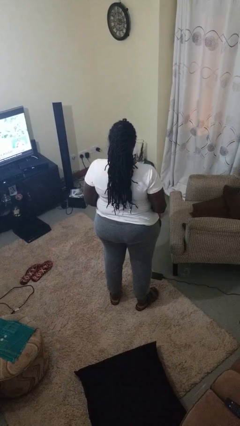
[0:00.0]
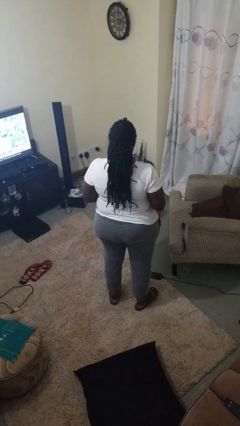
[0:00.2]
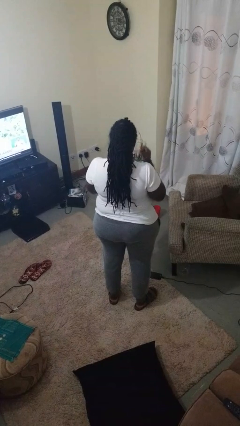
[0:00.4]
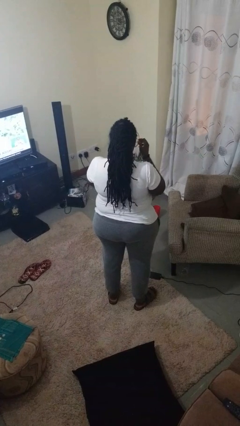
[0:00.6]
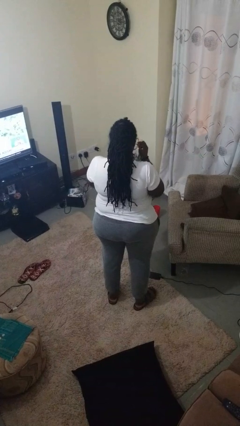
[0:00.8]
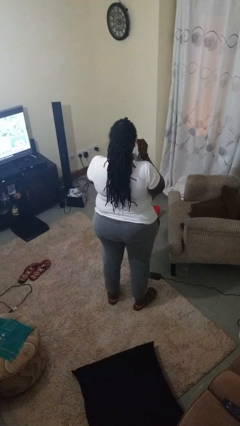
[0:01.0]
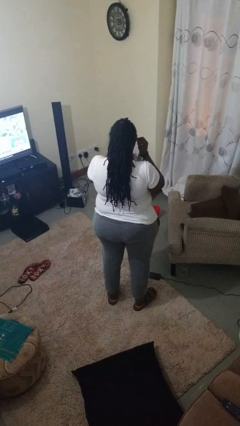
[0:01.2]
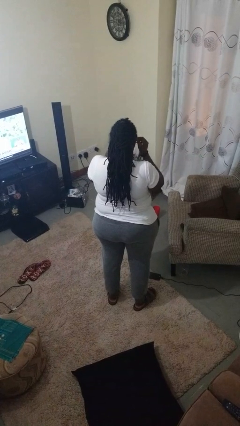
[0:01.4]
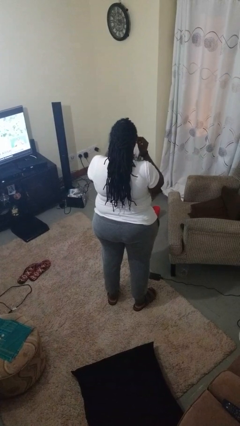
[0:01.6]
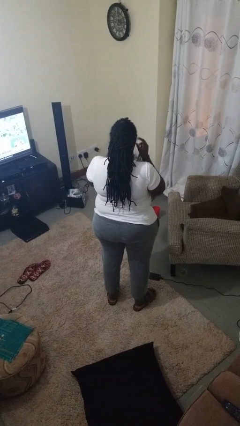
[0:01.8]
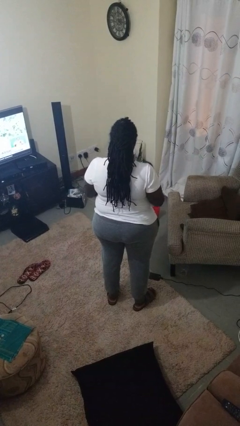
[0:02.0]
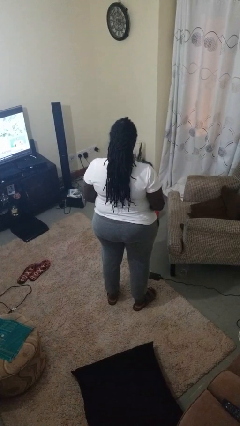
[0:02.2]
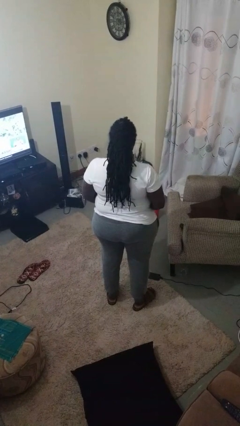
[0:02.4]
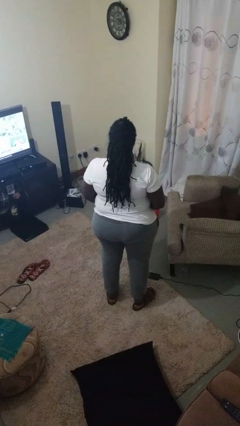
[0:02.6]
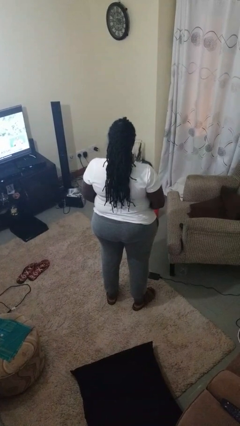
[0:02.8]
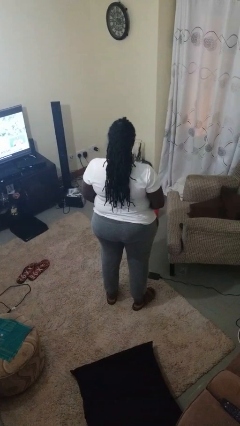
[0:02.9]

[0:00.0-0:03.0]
person puts on sunglasses

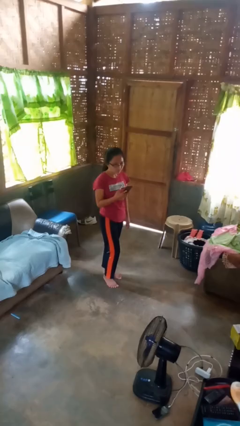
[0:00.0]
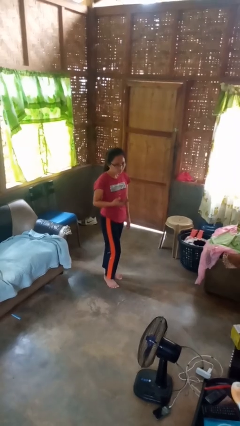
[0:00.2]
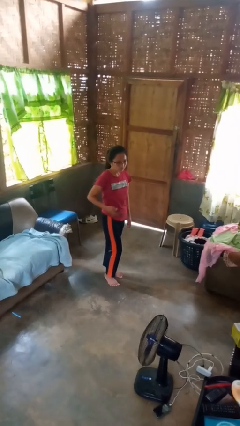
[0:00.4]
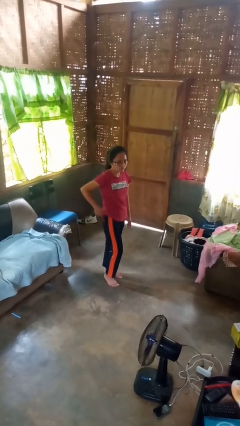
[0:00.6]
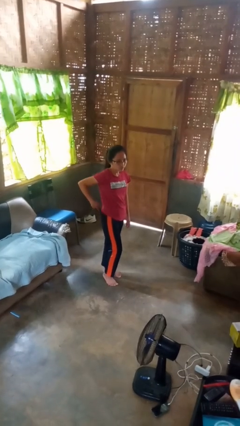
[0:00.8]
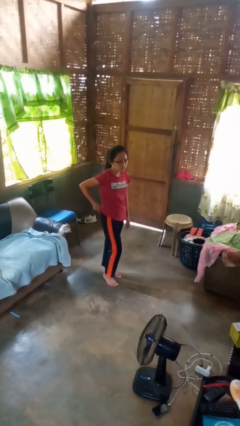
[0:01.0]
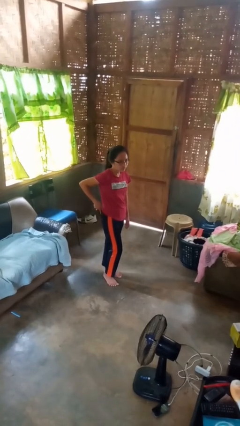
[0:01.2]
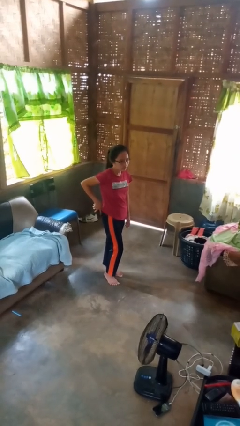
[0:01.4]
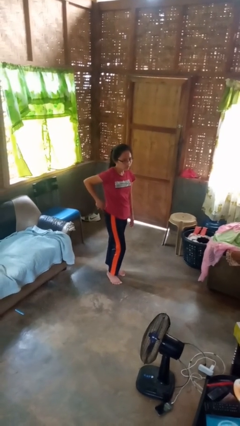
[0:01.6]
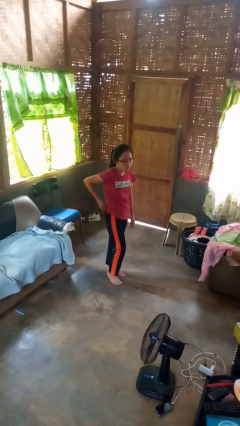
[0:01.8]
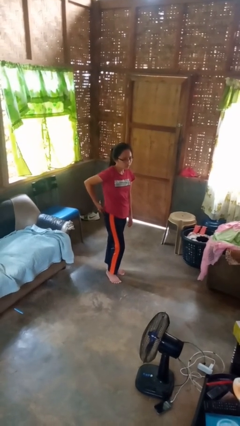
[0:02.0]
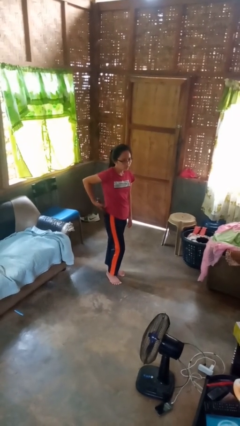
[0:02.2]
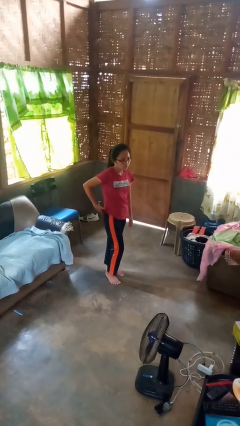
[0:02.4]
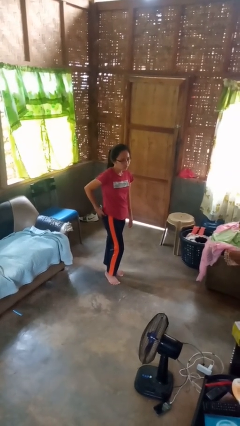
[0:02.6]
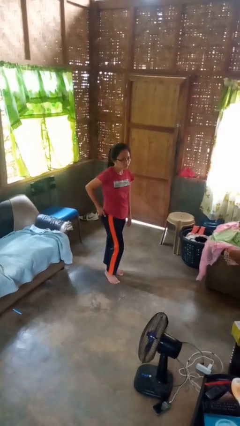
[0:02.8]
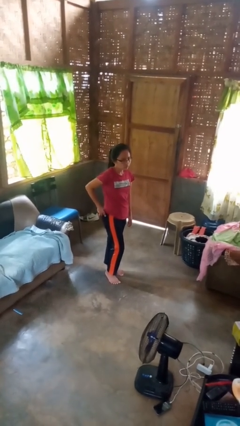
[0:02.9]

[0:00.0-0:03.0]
person puts phone into pocket

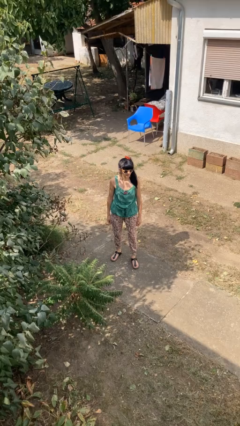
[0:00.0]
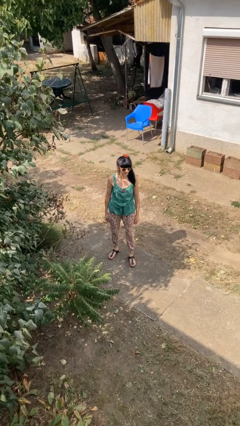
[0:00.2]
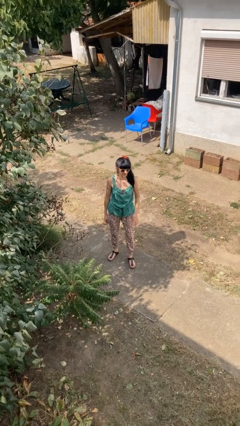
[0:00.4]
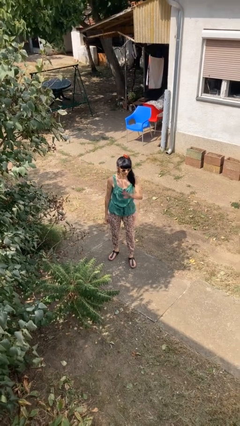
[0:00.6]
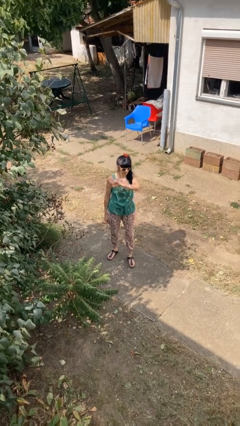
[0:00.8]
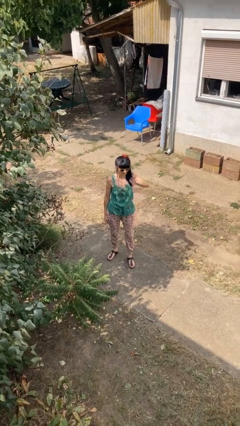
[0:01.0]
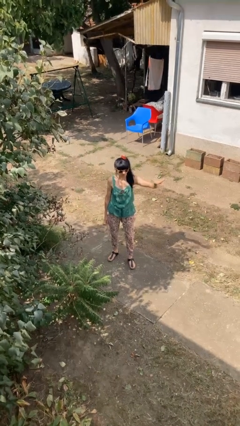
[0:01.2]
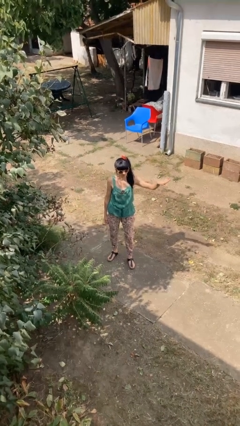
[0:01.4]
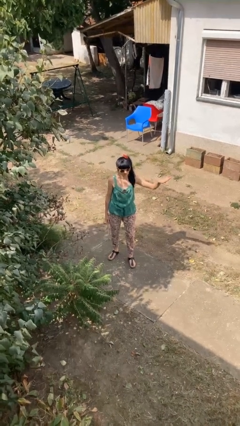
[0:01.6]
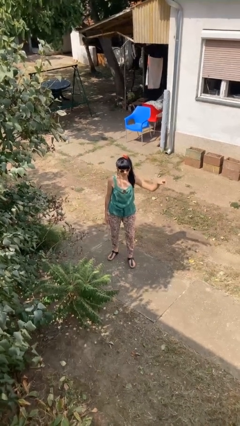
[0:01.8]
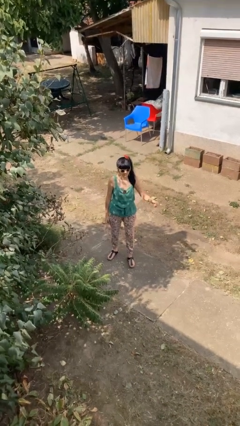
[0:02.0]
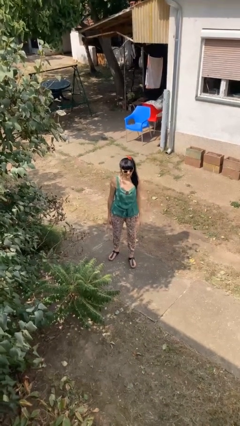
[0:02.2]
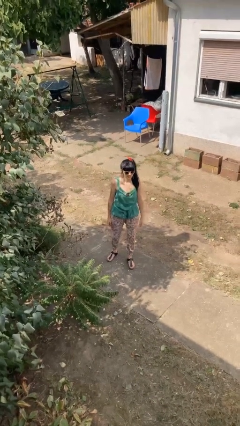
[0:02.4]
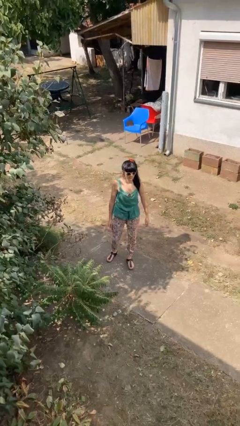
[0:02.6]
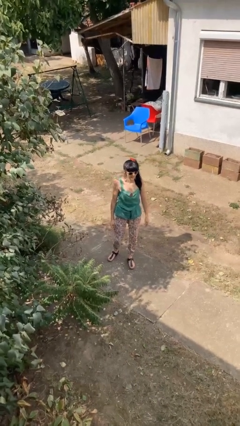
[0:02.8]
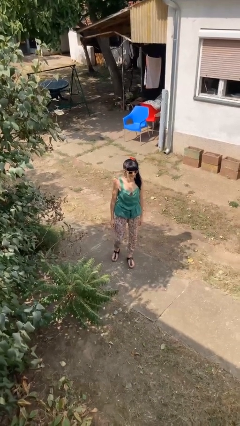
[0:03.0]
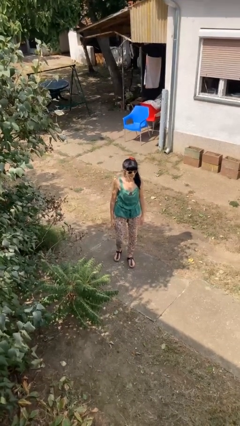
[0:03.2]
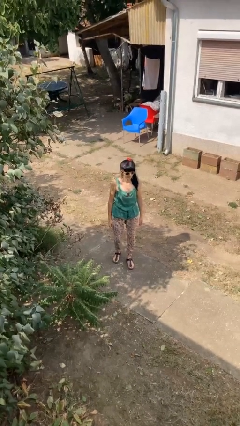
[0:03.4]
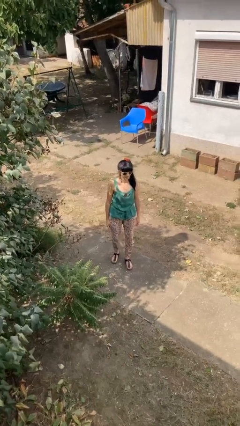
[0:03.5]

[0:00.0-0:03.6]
person gestures swipe left

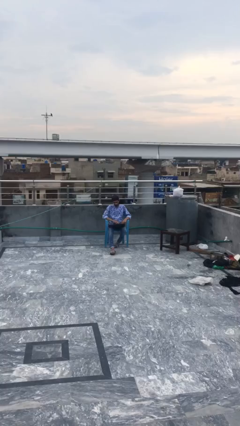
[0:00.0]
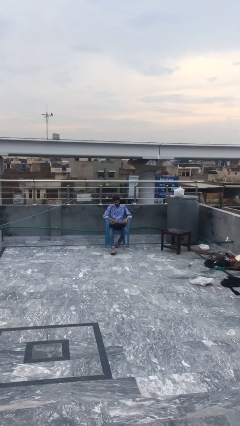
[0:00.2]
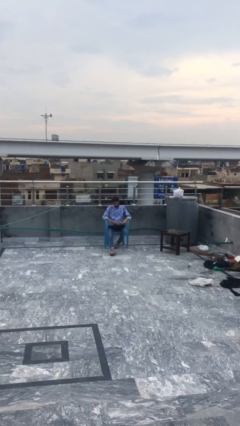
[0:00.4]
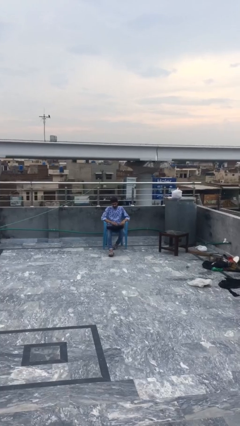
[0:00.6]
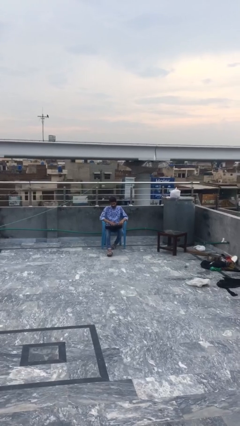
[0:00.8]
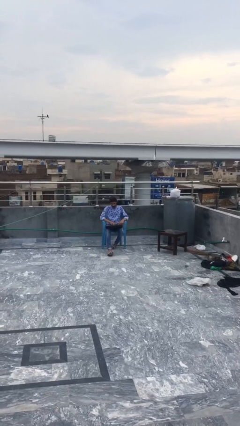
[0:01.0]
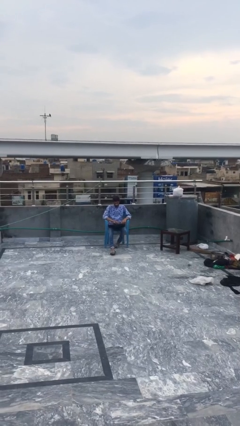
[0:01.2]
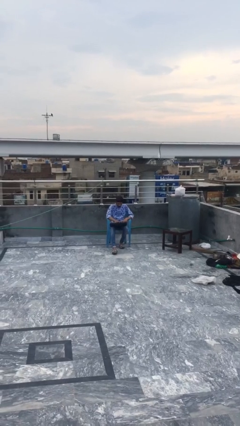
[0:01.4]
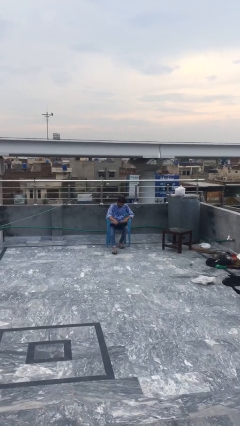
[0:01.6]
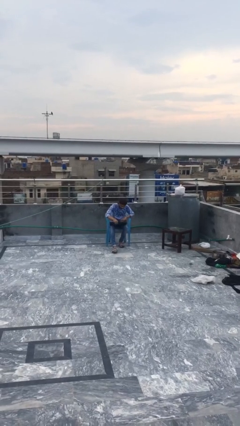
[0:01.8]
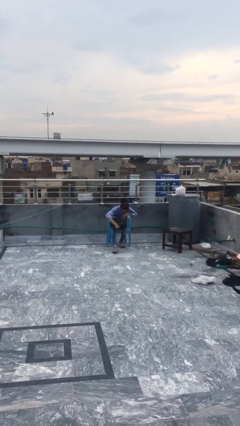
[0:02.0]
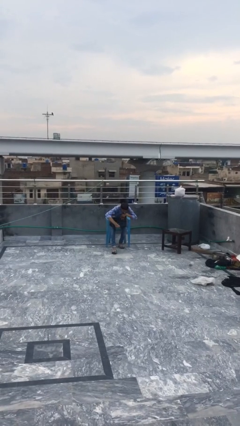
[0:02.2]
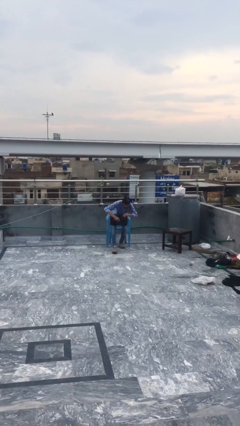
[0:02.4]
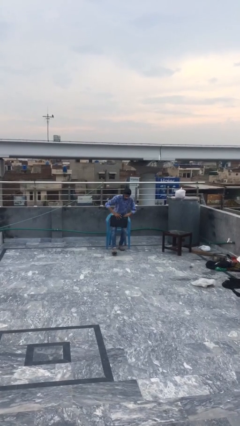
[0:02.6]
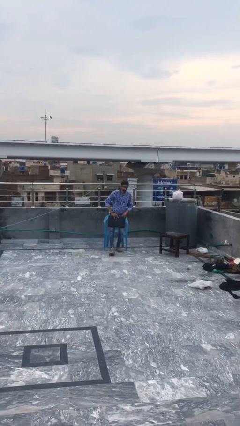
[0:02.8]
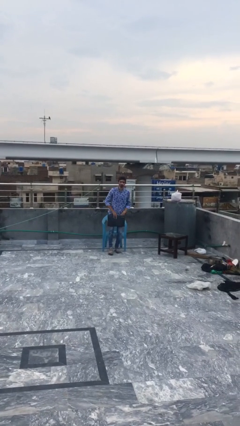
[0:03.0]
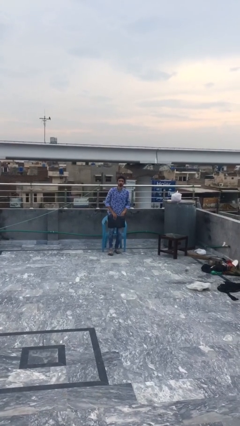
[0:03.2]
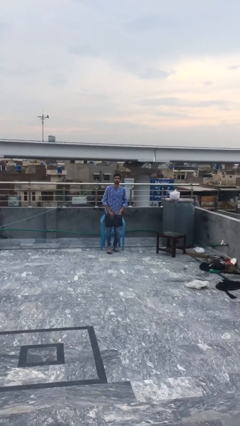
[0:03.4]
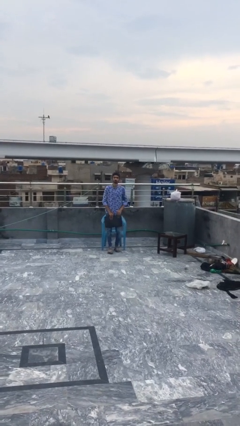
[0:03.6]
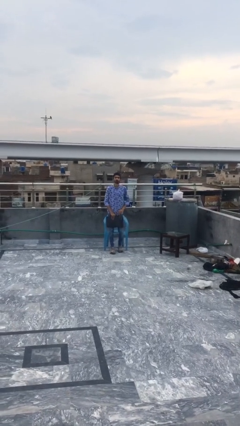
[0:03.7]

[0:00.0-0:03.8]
person stands up

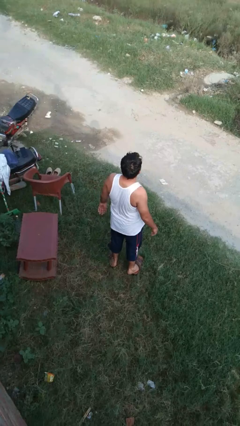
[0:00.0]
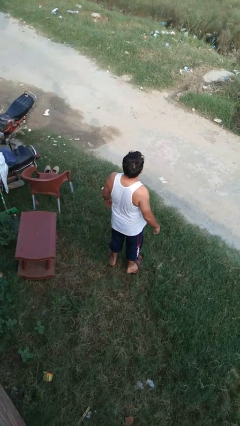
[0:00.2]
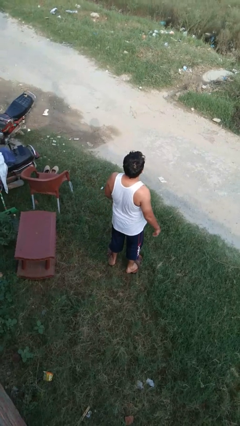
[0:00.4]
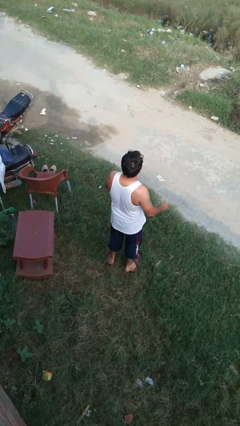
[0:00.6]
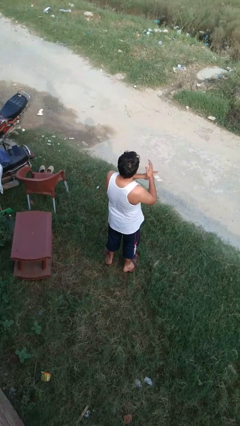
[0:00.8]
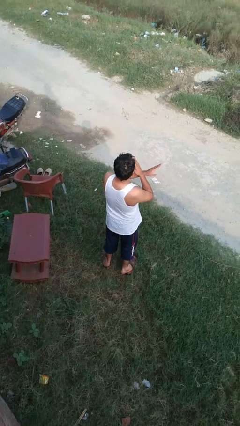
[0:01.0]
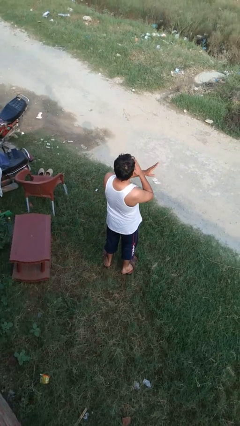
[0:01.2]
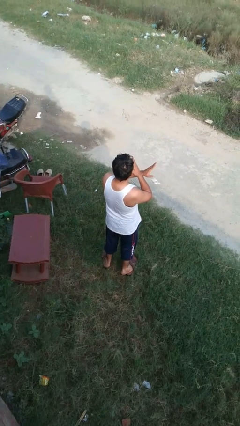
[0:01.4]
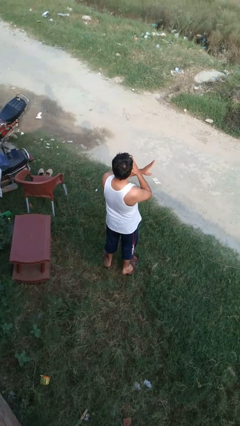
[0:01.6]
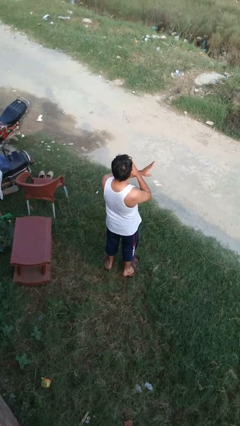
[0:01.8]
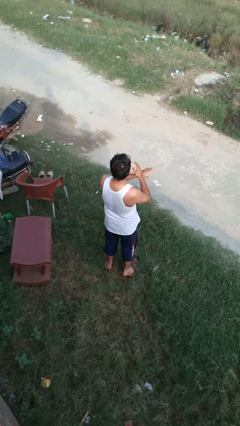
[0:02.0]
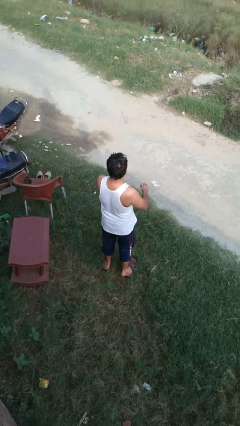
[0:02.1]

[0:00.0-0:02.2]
person karate chop

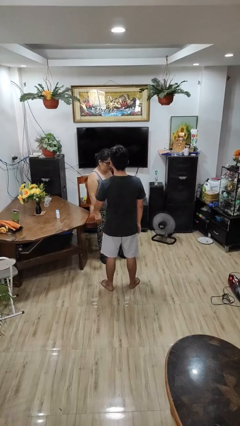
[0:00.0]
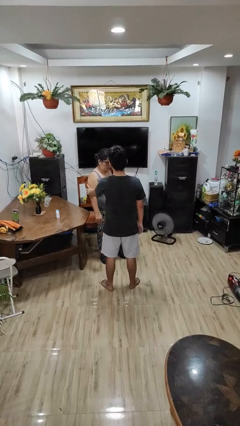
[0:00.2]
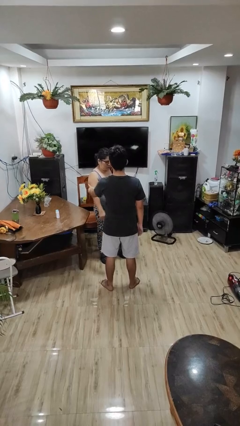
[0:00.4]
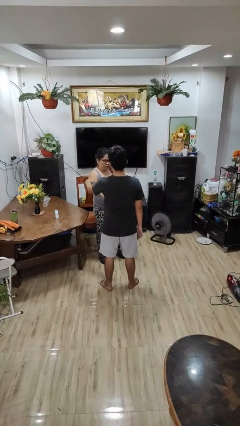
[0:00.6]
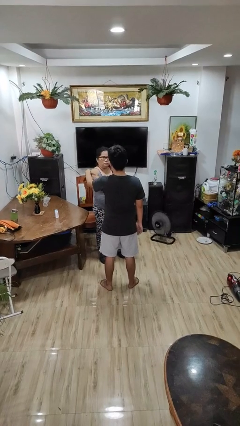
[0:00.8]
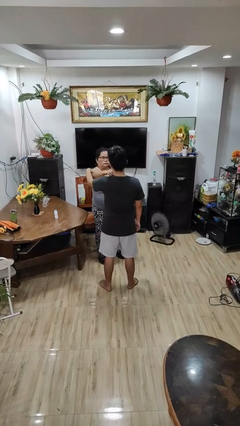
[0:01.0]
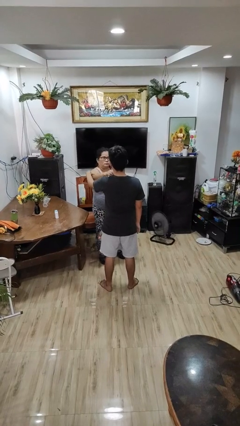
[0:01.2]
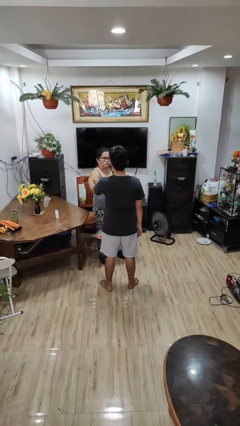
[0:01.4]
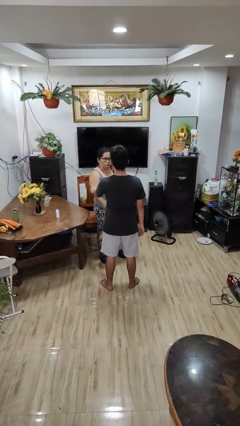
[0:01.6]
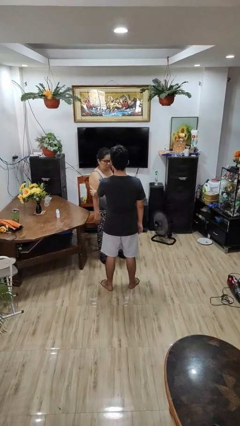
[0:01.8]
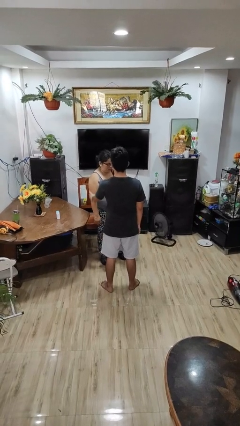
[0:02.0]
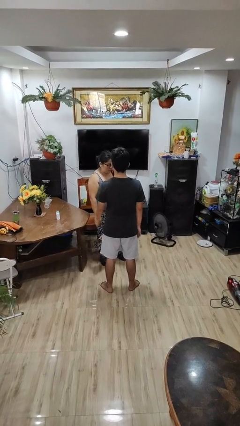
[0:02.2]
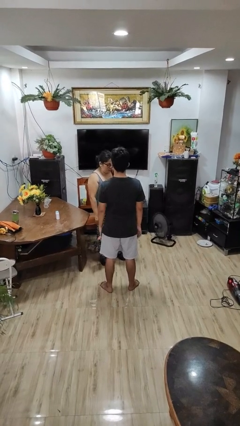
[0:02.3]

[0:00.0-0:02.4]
person grabs person by bicep
